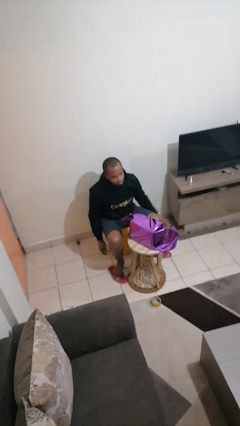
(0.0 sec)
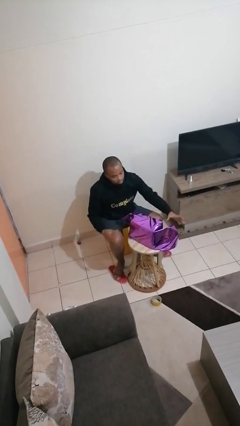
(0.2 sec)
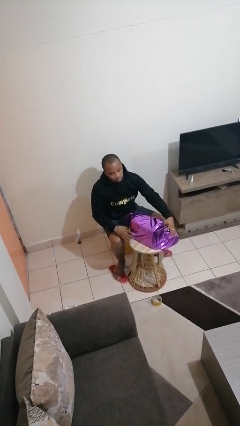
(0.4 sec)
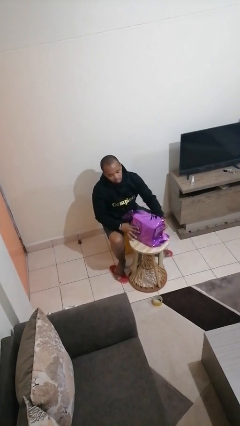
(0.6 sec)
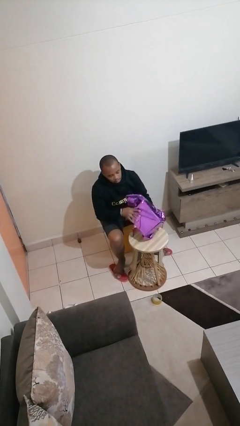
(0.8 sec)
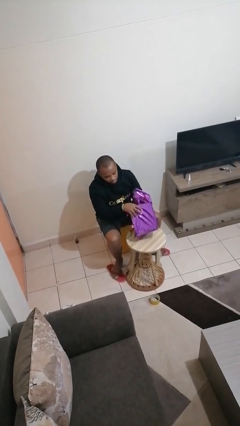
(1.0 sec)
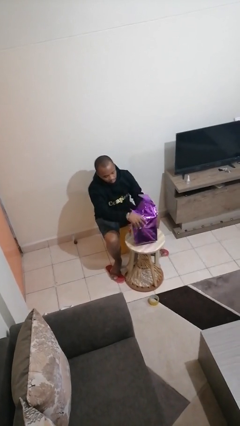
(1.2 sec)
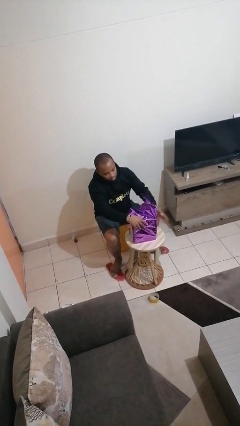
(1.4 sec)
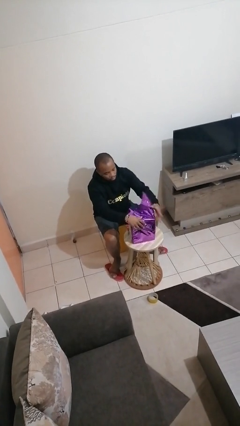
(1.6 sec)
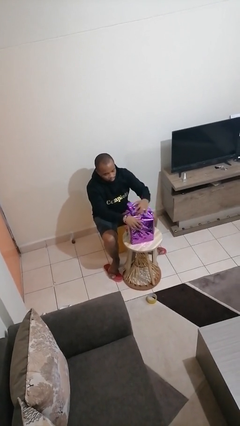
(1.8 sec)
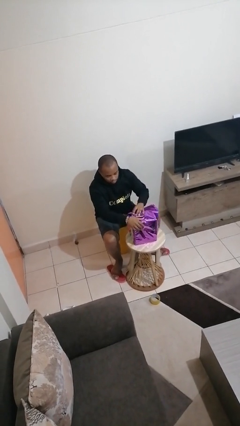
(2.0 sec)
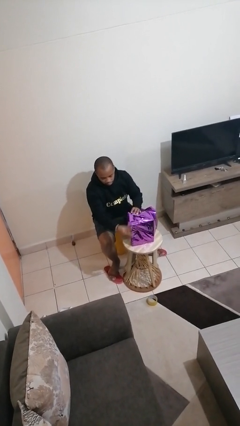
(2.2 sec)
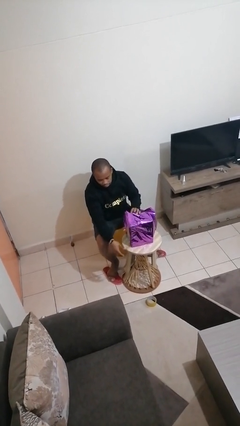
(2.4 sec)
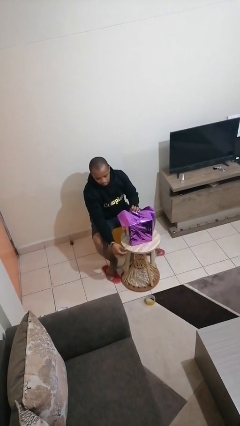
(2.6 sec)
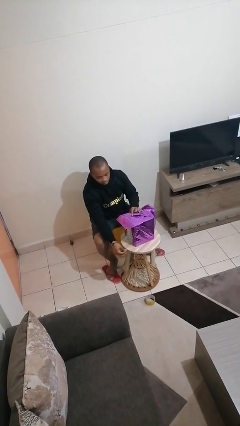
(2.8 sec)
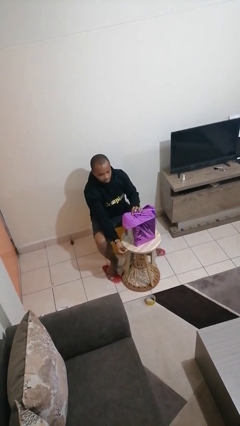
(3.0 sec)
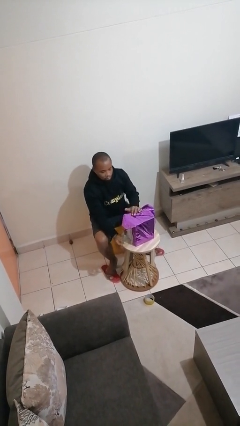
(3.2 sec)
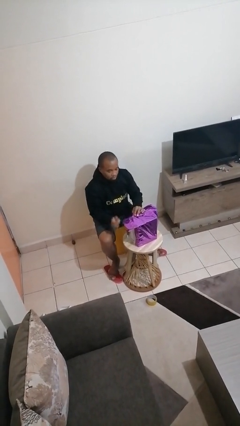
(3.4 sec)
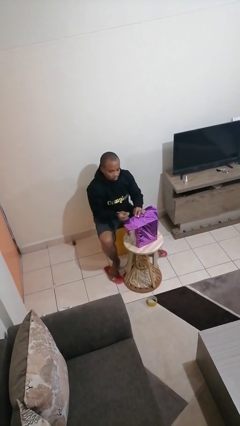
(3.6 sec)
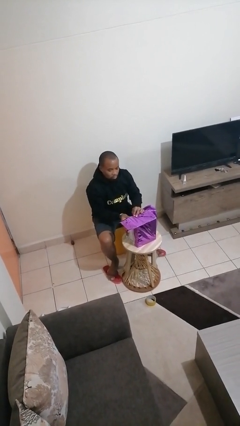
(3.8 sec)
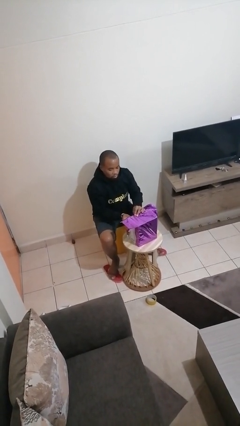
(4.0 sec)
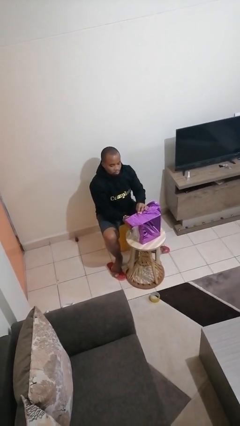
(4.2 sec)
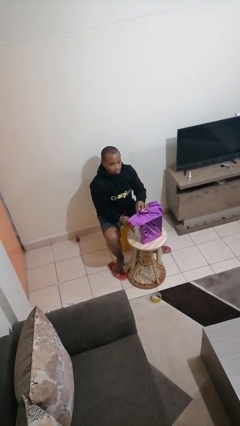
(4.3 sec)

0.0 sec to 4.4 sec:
person wraps box

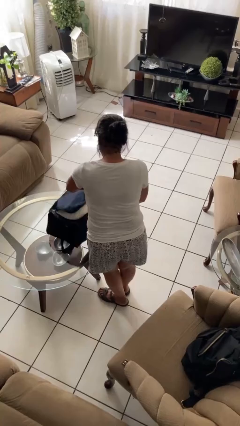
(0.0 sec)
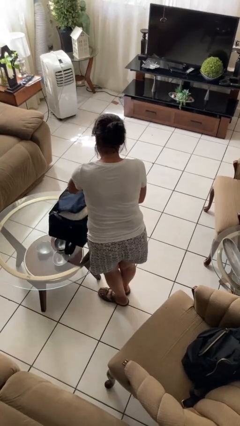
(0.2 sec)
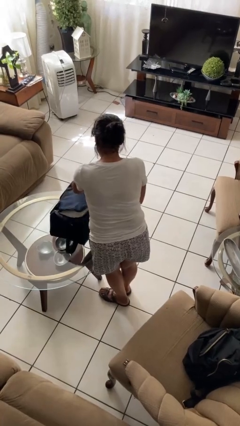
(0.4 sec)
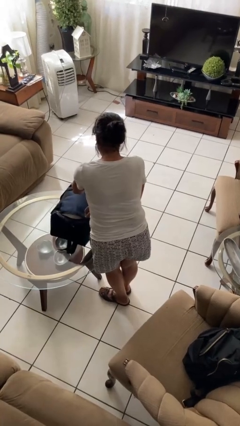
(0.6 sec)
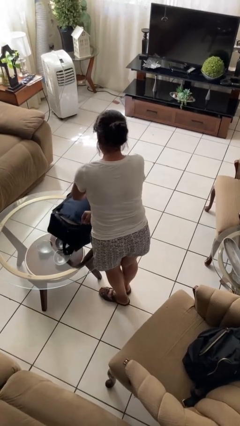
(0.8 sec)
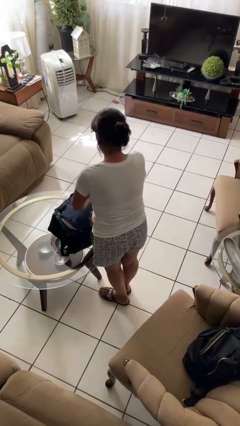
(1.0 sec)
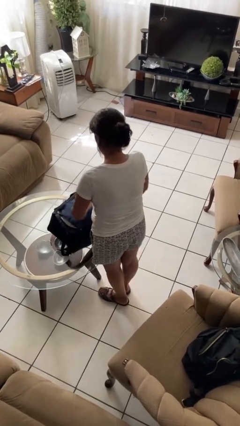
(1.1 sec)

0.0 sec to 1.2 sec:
person closes suitcase

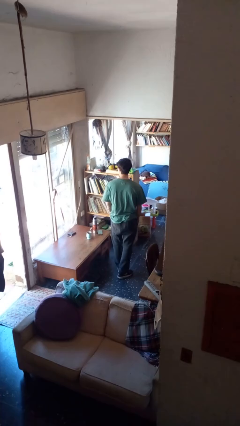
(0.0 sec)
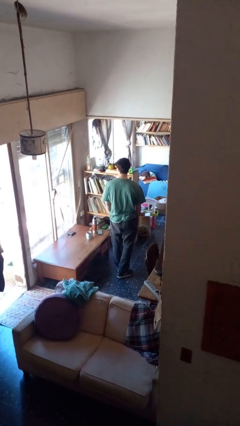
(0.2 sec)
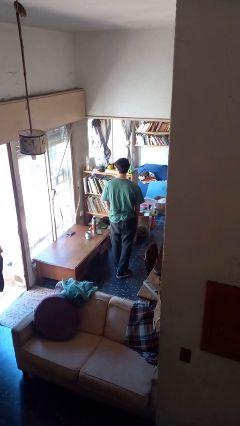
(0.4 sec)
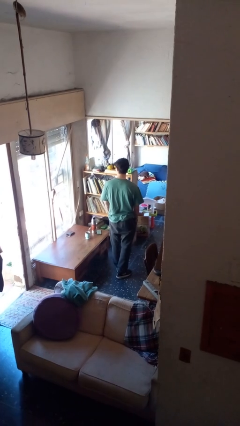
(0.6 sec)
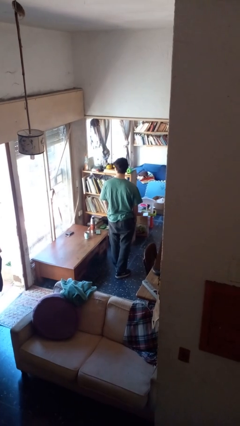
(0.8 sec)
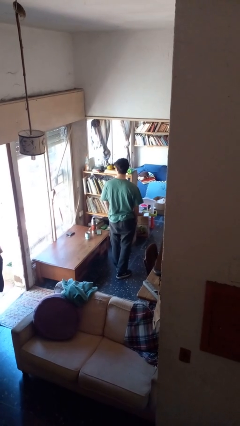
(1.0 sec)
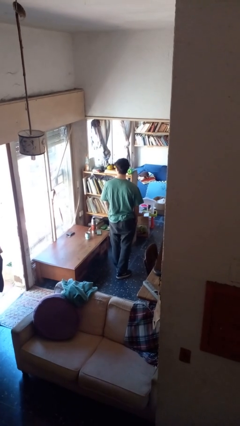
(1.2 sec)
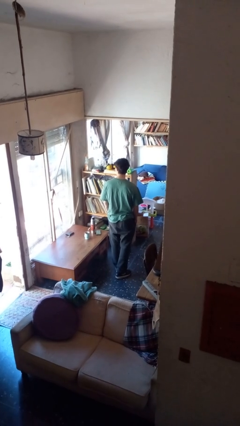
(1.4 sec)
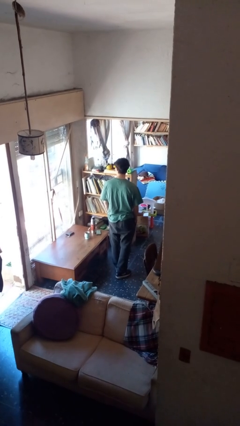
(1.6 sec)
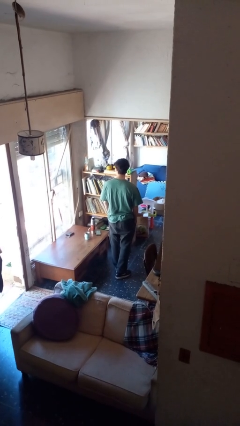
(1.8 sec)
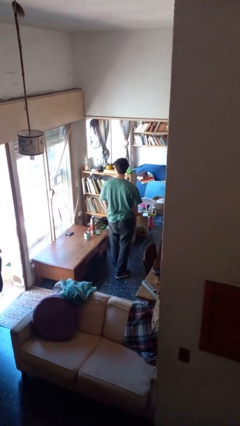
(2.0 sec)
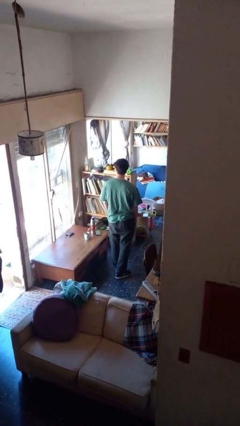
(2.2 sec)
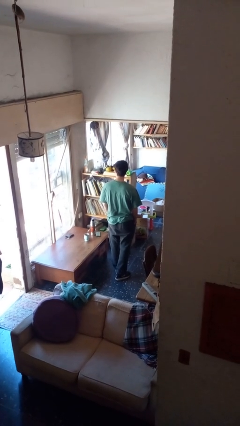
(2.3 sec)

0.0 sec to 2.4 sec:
person sticks out tongue

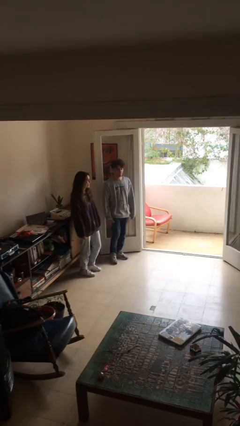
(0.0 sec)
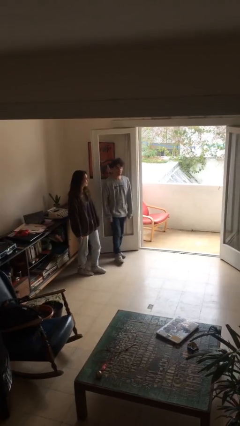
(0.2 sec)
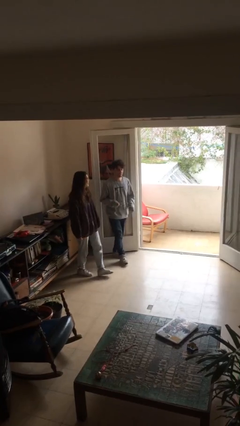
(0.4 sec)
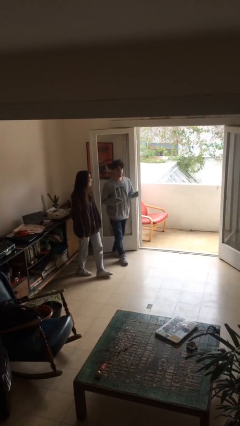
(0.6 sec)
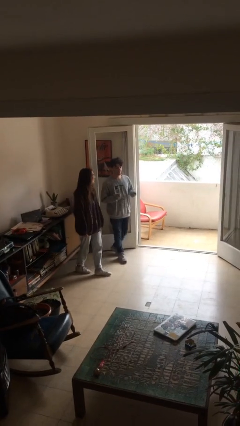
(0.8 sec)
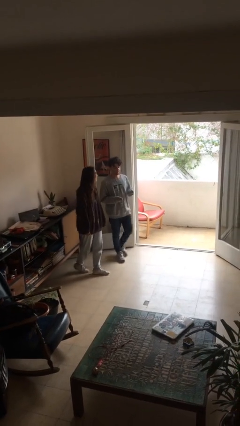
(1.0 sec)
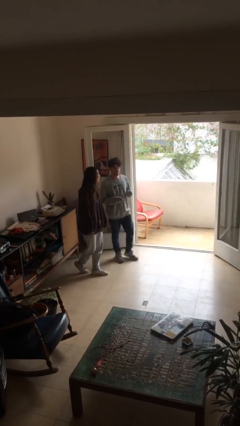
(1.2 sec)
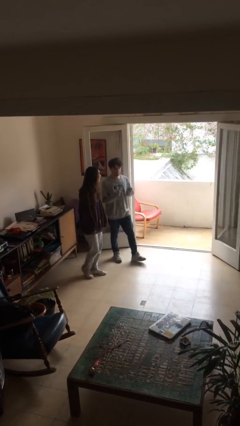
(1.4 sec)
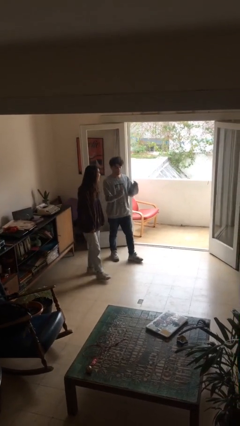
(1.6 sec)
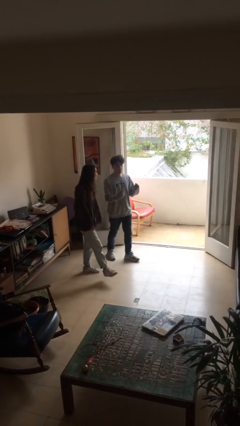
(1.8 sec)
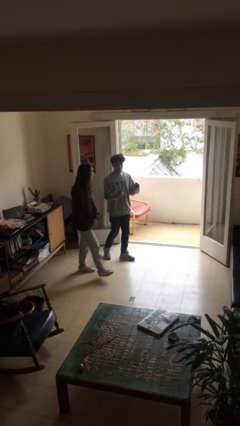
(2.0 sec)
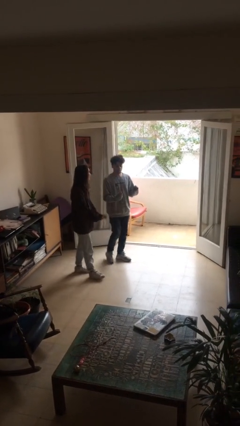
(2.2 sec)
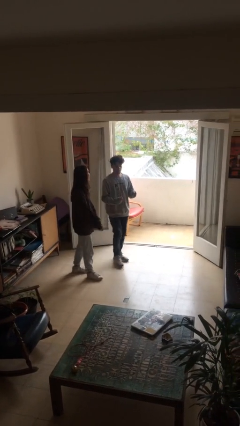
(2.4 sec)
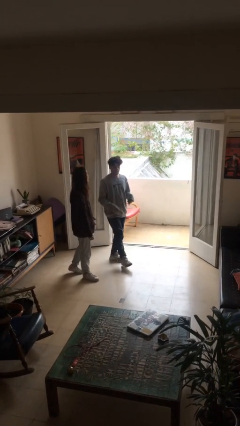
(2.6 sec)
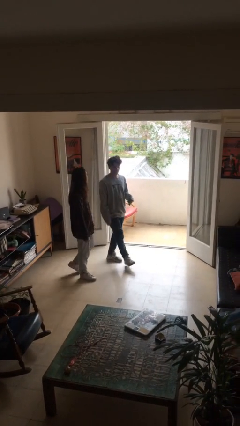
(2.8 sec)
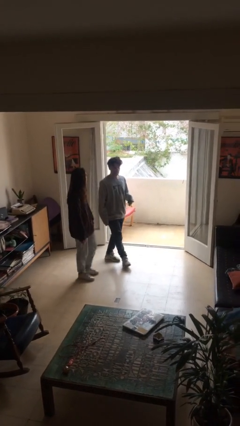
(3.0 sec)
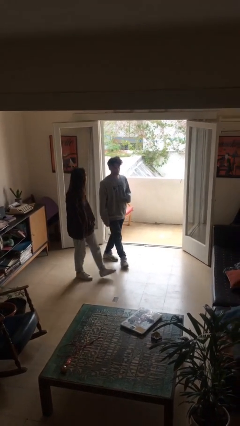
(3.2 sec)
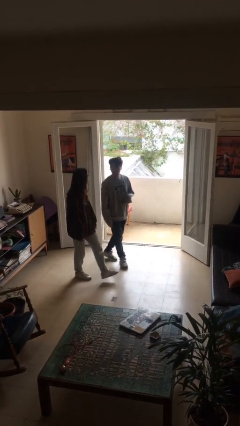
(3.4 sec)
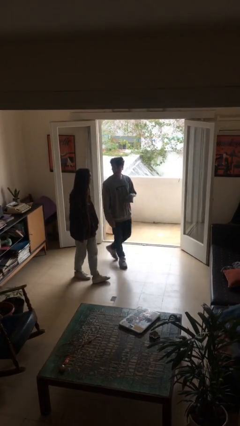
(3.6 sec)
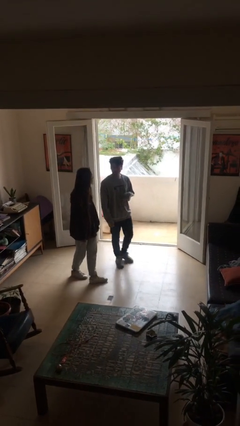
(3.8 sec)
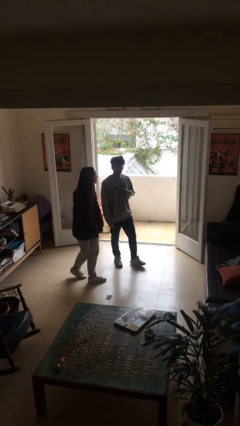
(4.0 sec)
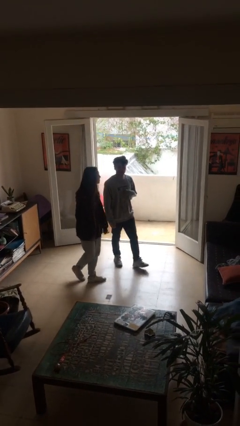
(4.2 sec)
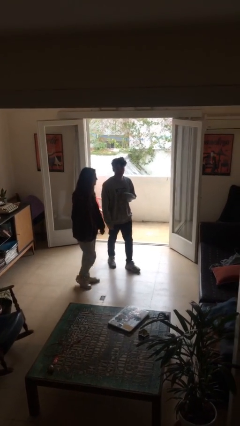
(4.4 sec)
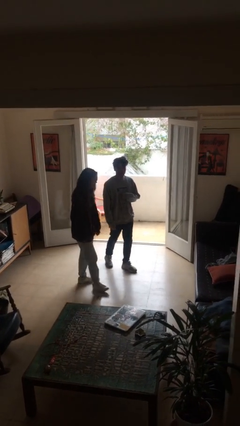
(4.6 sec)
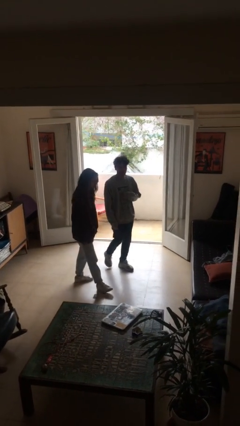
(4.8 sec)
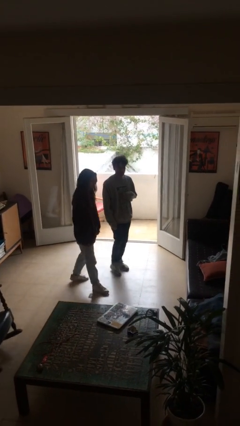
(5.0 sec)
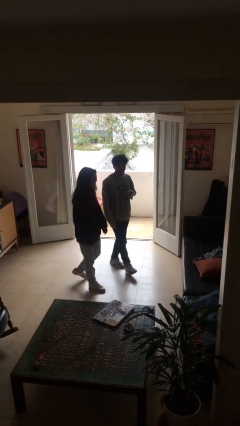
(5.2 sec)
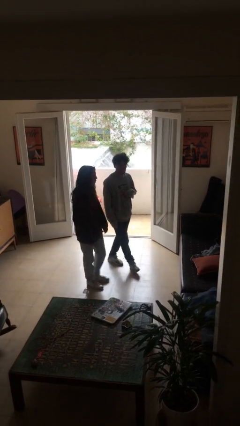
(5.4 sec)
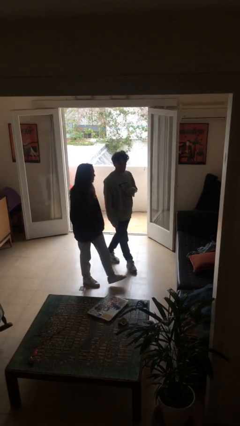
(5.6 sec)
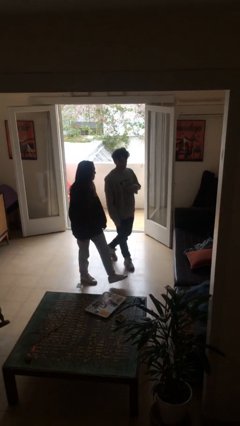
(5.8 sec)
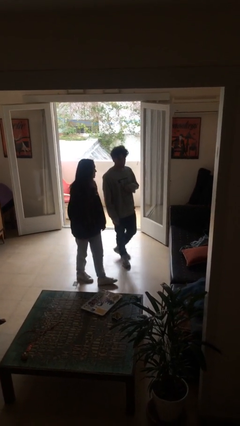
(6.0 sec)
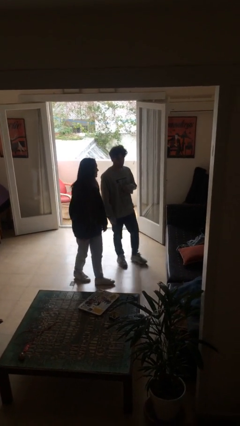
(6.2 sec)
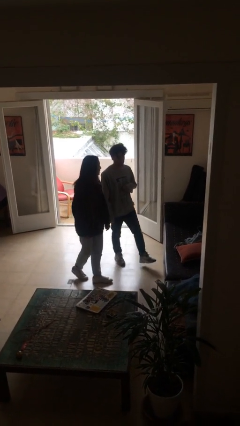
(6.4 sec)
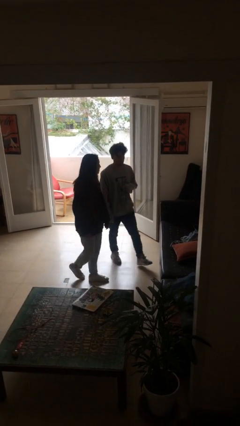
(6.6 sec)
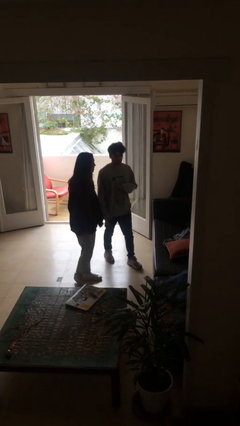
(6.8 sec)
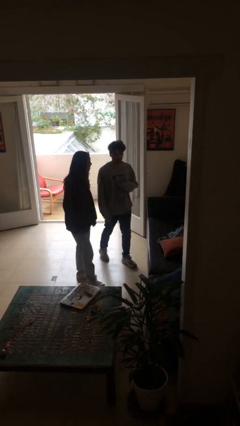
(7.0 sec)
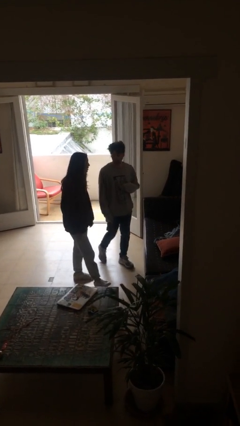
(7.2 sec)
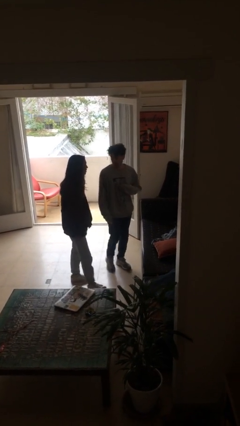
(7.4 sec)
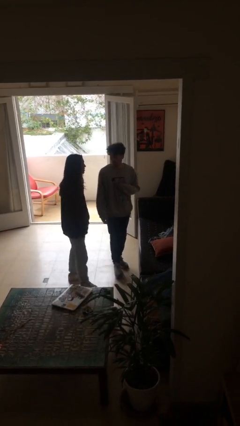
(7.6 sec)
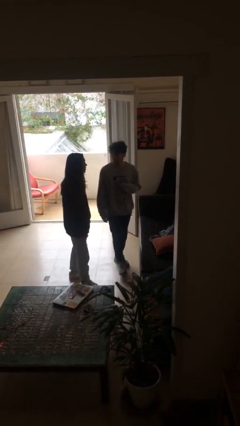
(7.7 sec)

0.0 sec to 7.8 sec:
person talks to person

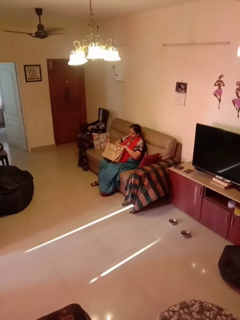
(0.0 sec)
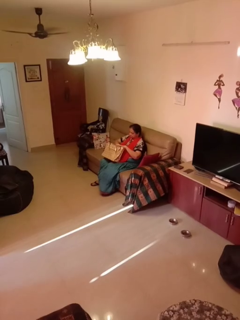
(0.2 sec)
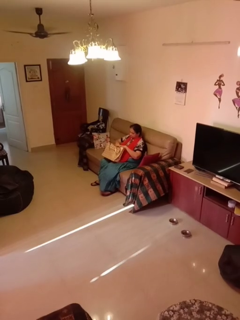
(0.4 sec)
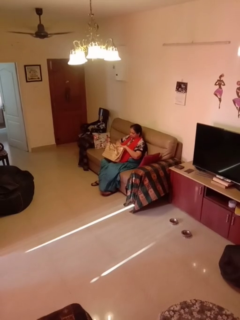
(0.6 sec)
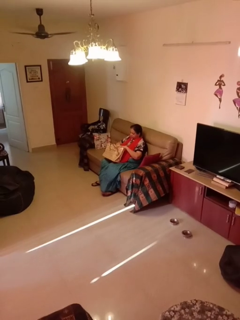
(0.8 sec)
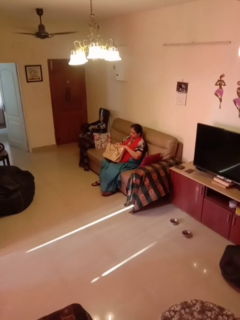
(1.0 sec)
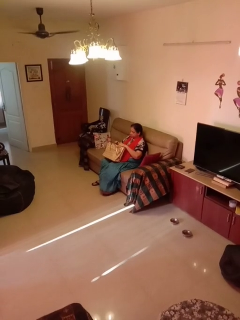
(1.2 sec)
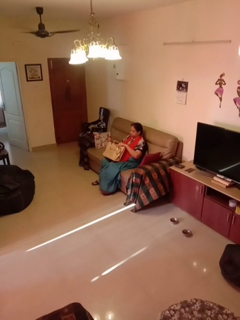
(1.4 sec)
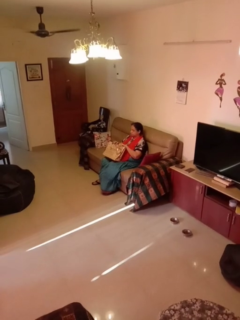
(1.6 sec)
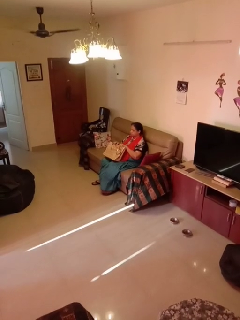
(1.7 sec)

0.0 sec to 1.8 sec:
person puts object into purse

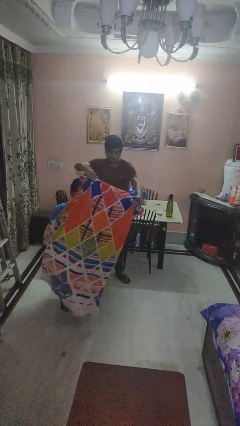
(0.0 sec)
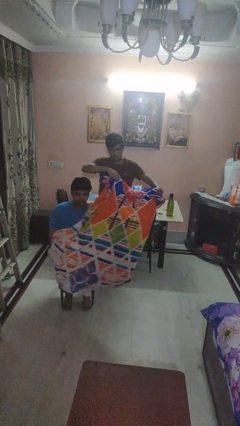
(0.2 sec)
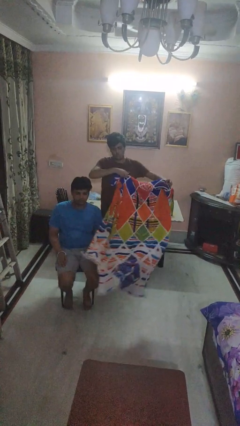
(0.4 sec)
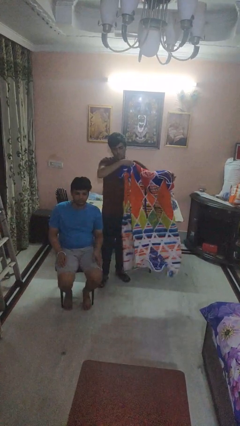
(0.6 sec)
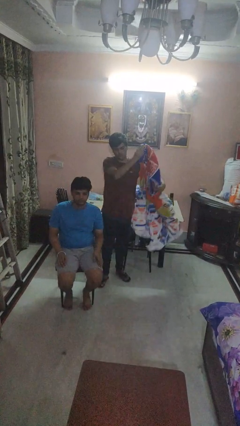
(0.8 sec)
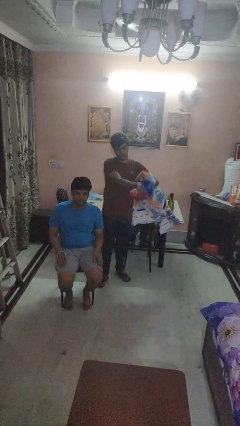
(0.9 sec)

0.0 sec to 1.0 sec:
person uncovers friend with blanket
